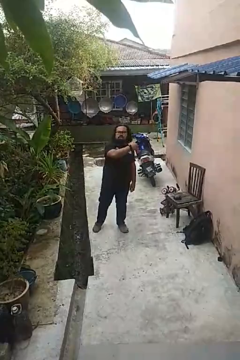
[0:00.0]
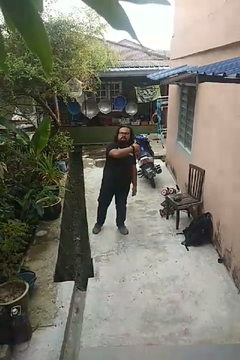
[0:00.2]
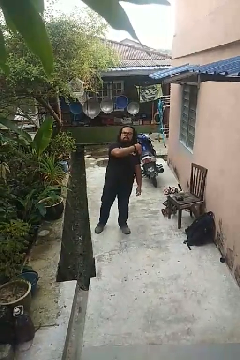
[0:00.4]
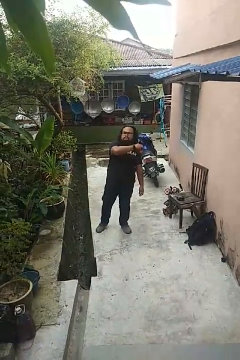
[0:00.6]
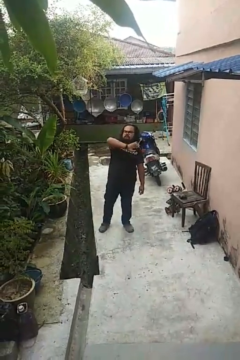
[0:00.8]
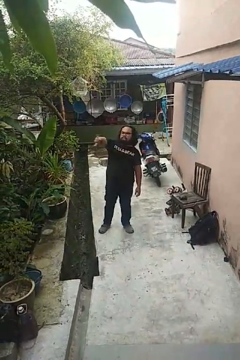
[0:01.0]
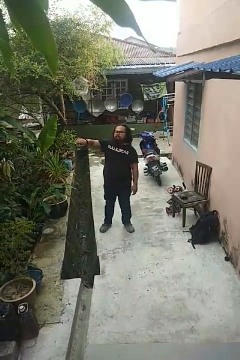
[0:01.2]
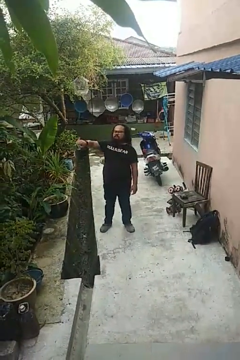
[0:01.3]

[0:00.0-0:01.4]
person gestures swipe right

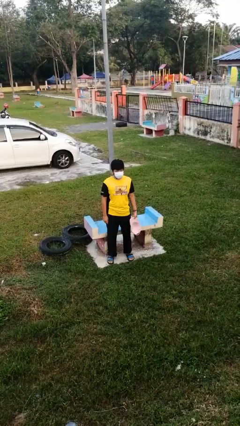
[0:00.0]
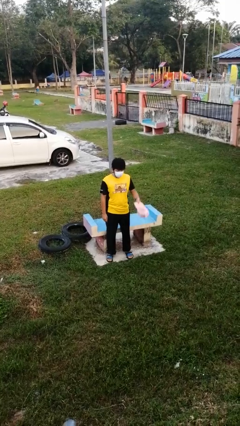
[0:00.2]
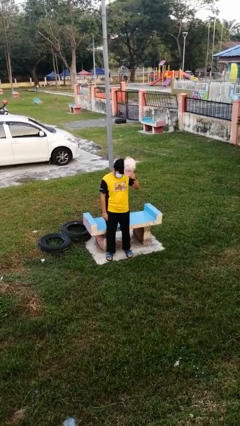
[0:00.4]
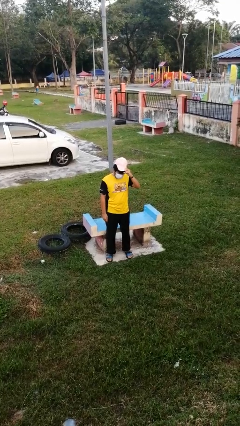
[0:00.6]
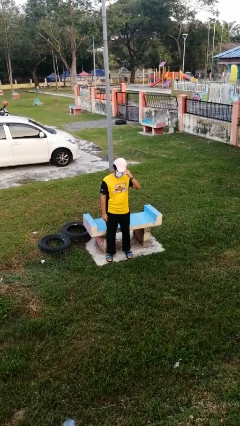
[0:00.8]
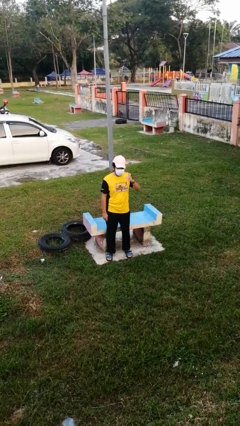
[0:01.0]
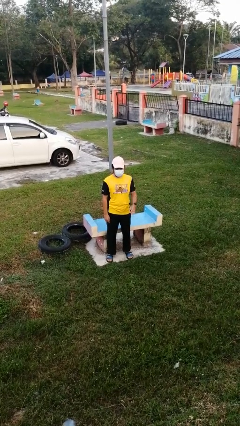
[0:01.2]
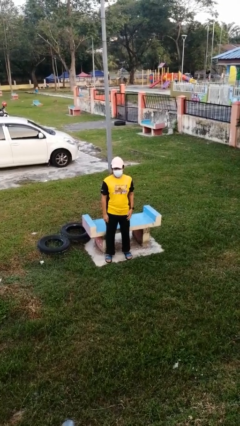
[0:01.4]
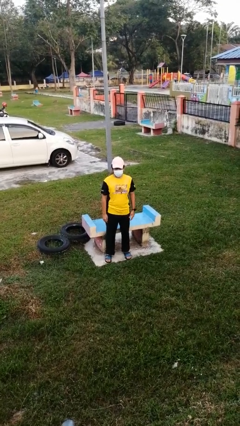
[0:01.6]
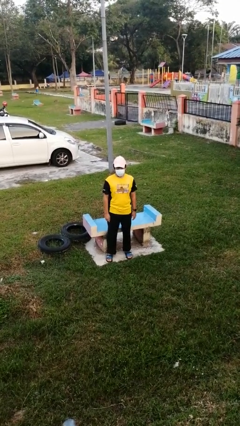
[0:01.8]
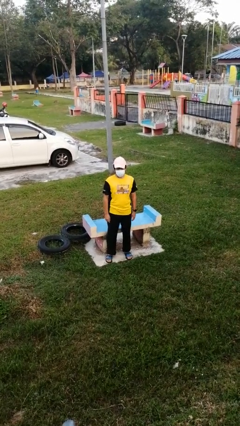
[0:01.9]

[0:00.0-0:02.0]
person puts on hat

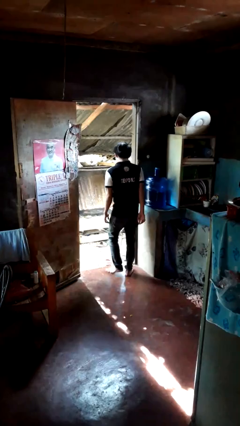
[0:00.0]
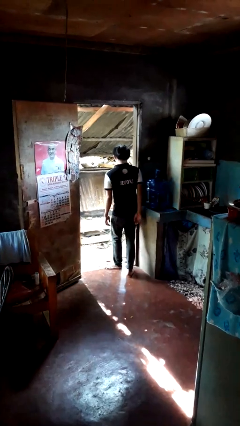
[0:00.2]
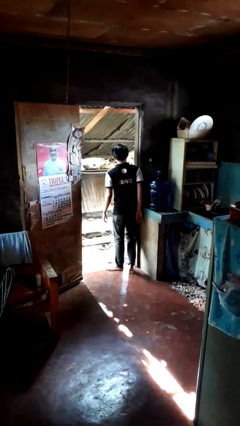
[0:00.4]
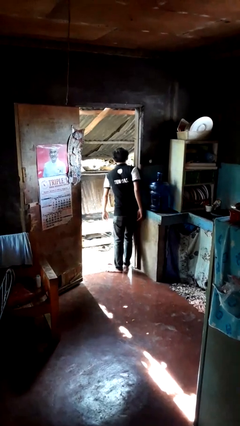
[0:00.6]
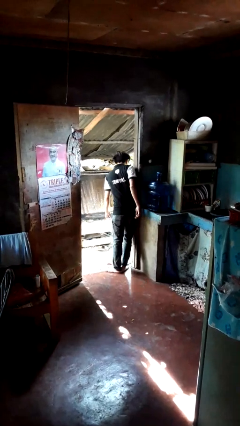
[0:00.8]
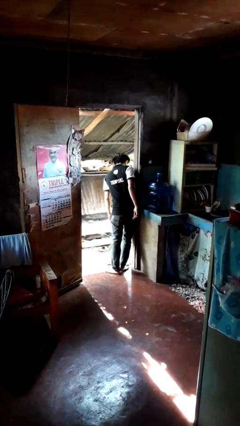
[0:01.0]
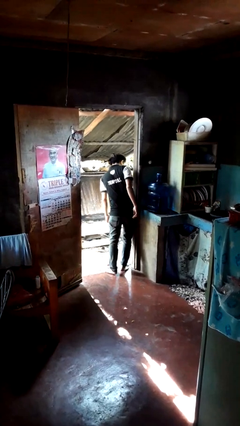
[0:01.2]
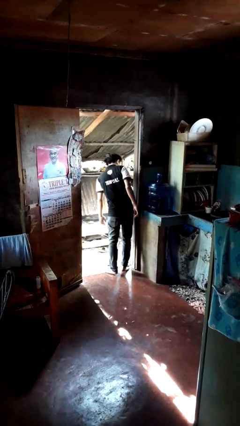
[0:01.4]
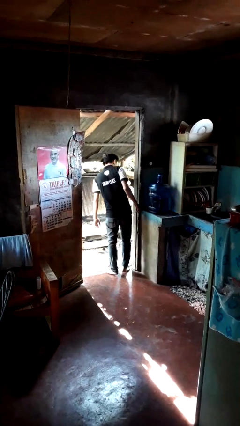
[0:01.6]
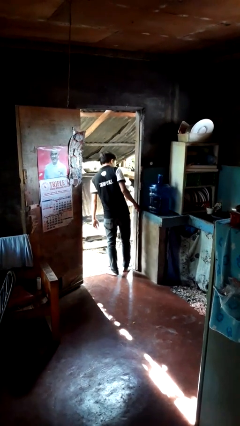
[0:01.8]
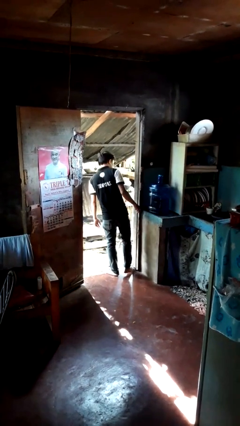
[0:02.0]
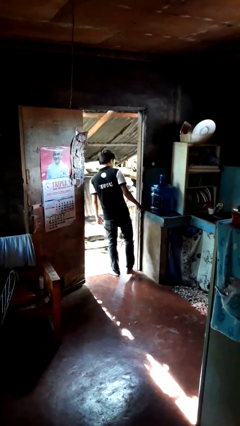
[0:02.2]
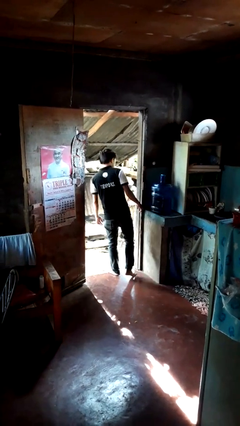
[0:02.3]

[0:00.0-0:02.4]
person bumps into wall

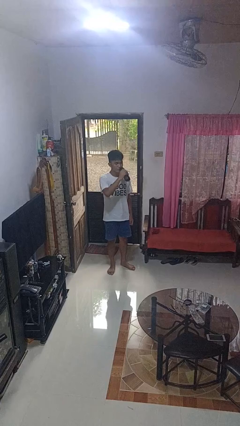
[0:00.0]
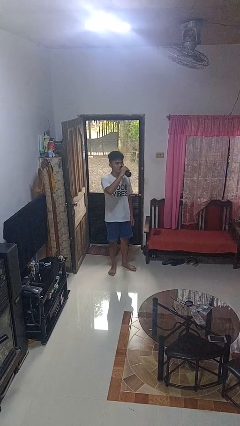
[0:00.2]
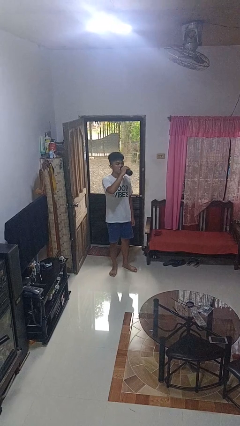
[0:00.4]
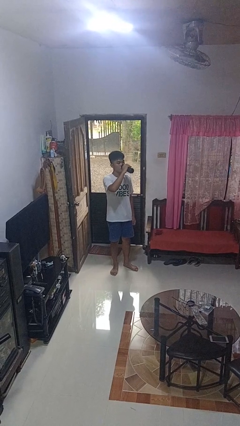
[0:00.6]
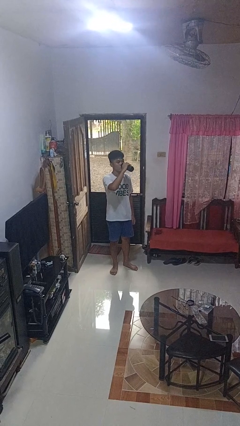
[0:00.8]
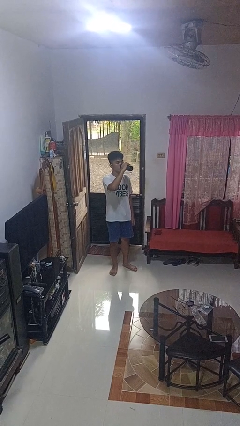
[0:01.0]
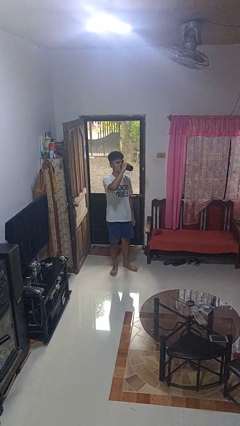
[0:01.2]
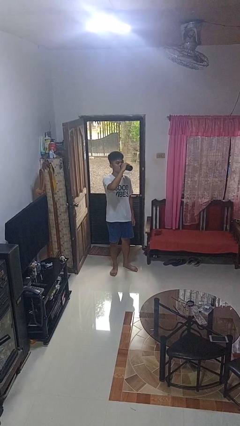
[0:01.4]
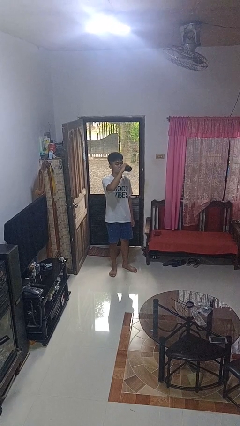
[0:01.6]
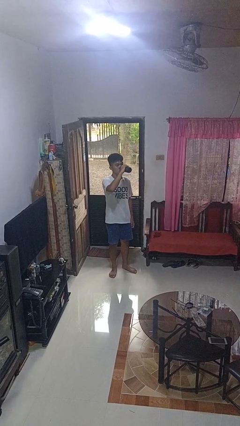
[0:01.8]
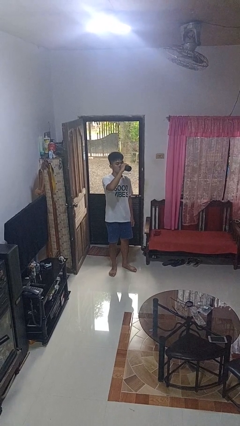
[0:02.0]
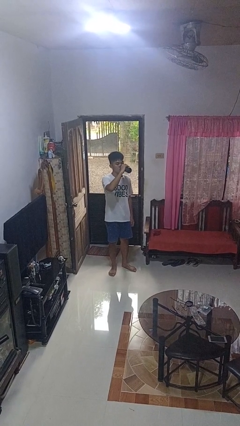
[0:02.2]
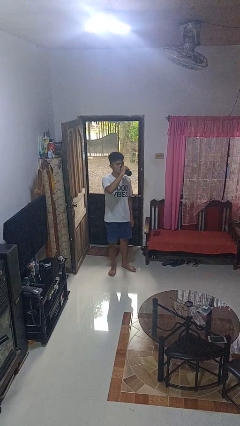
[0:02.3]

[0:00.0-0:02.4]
person drinks from bottle

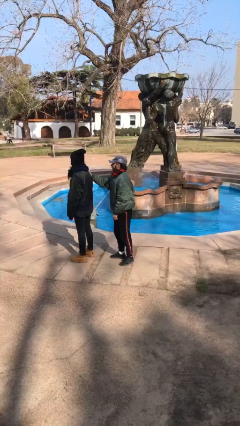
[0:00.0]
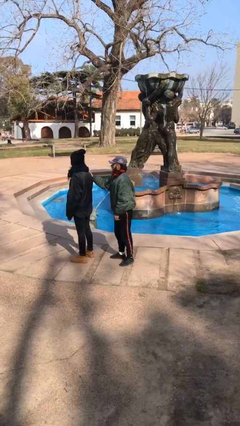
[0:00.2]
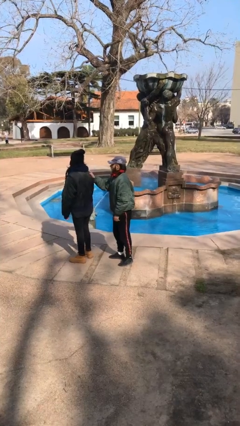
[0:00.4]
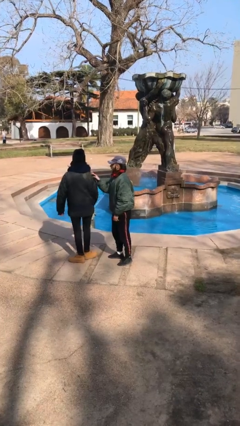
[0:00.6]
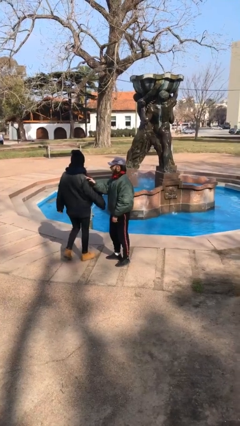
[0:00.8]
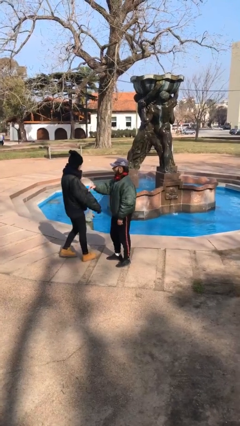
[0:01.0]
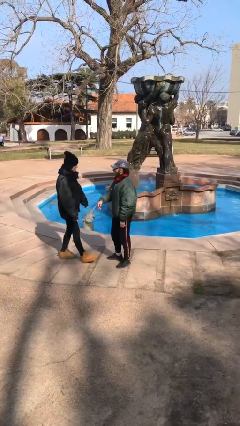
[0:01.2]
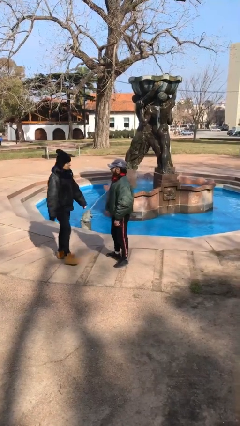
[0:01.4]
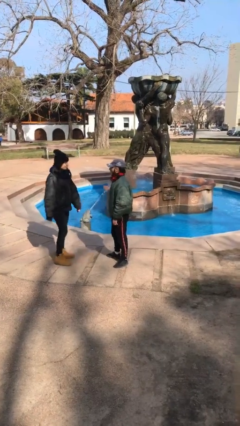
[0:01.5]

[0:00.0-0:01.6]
person spins person around

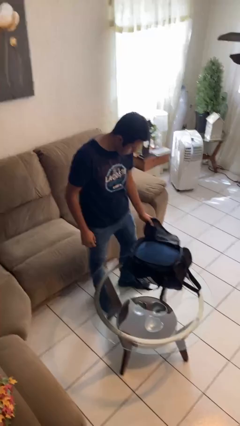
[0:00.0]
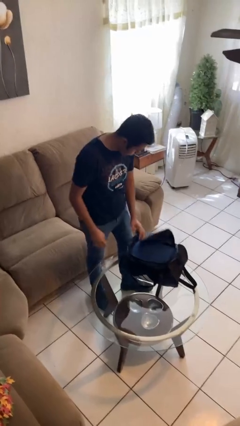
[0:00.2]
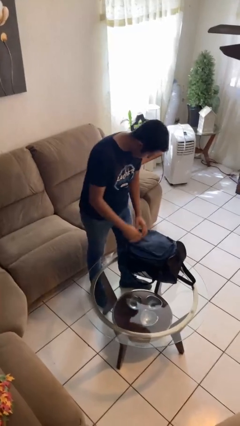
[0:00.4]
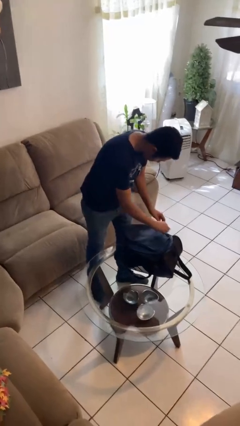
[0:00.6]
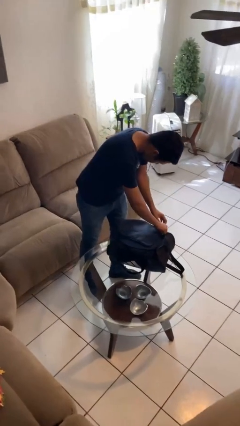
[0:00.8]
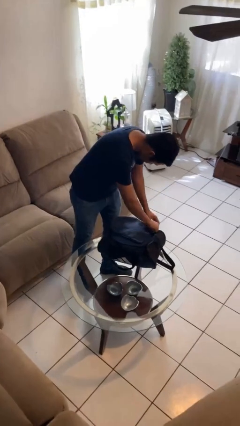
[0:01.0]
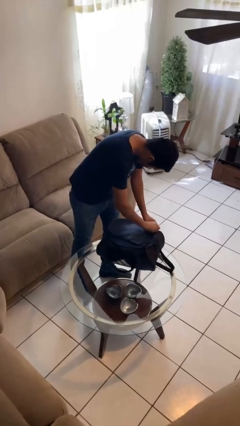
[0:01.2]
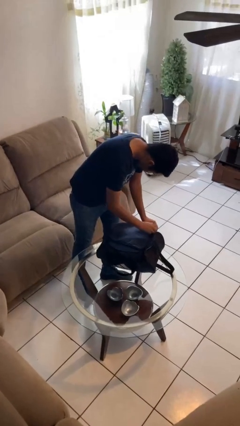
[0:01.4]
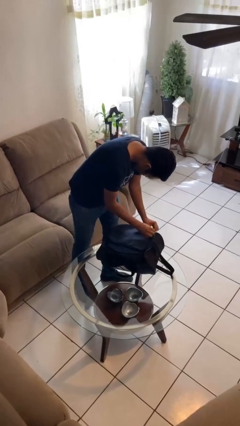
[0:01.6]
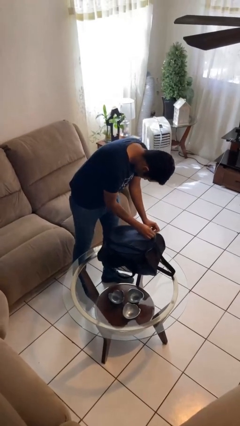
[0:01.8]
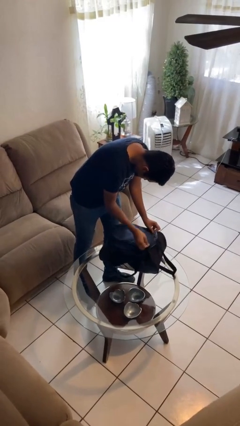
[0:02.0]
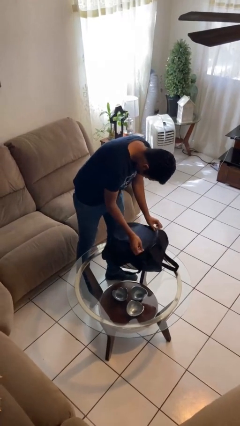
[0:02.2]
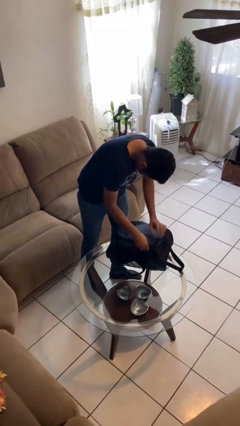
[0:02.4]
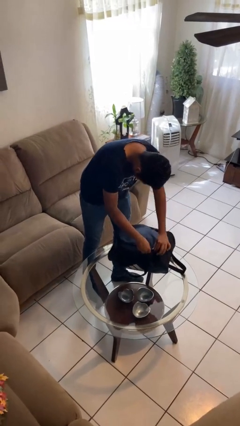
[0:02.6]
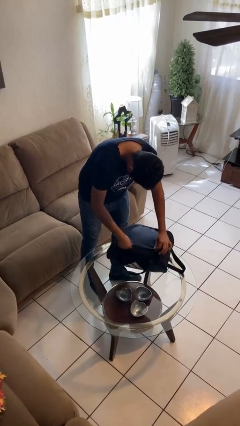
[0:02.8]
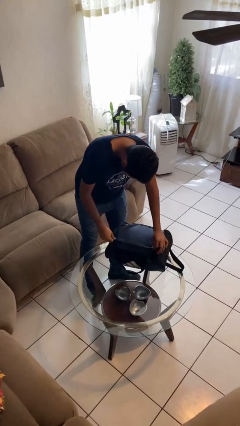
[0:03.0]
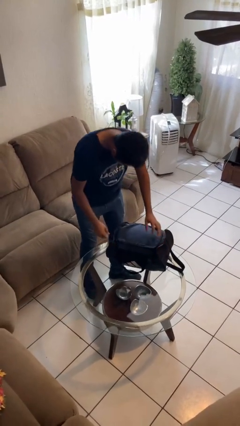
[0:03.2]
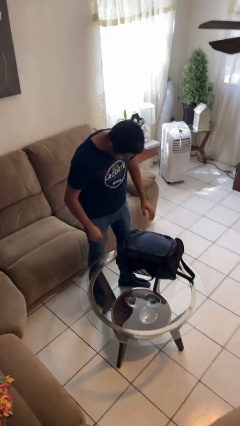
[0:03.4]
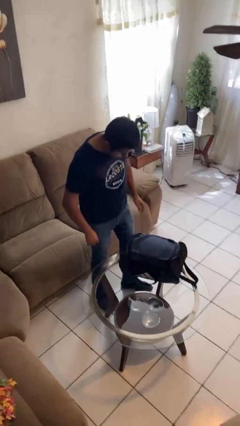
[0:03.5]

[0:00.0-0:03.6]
person closes suitcase

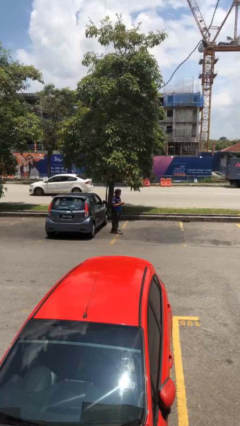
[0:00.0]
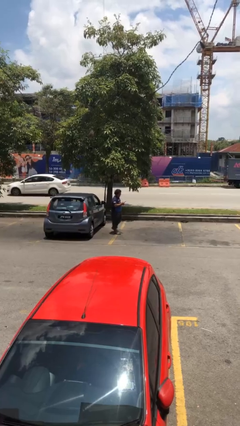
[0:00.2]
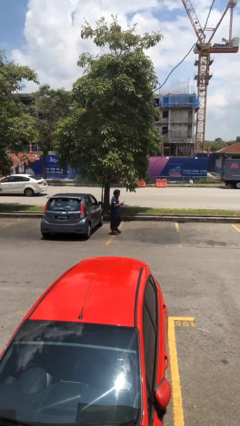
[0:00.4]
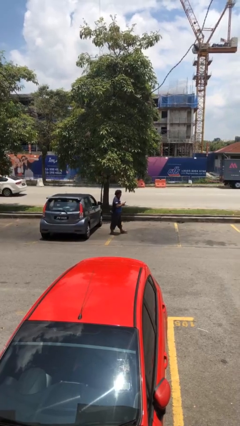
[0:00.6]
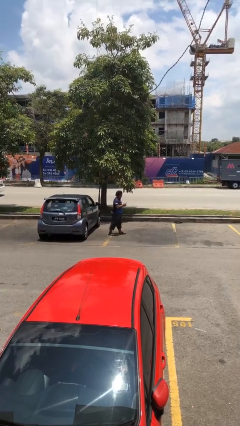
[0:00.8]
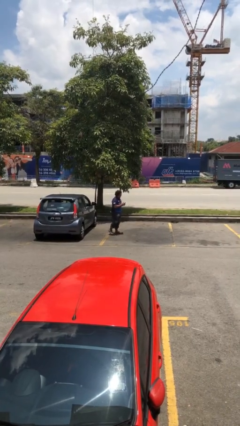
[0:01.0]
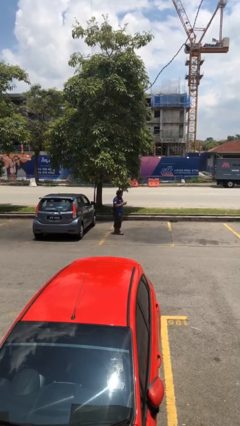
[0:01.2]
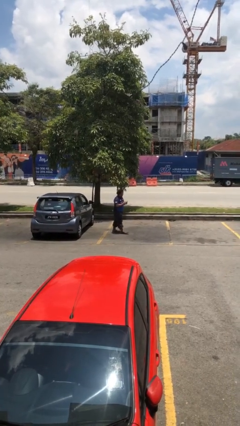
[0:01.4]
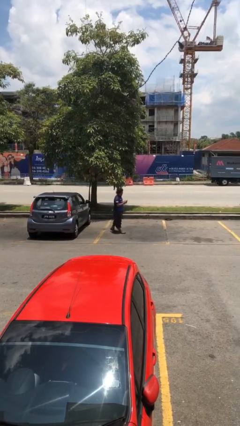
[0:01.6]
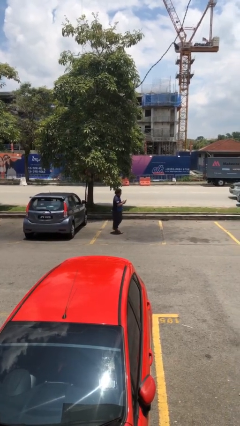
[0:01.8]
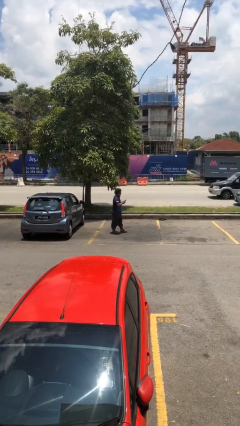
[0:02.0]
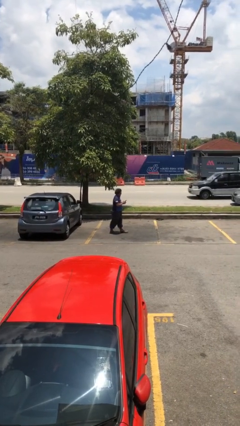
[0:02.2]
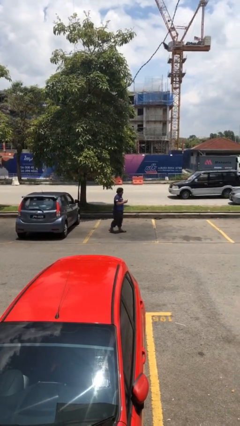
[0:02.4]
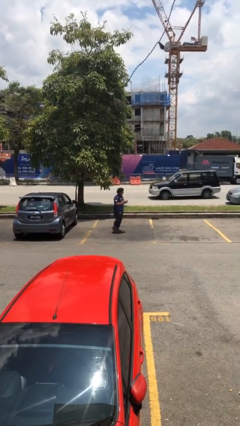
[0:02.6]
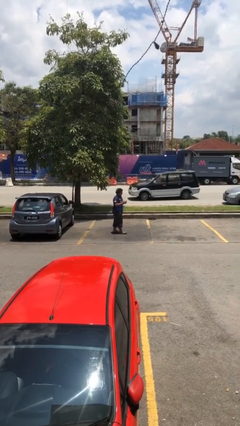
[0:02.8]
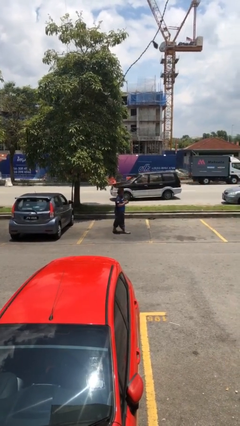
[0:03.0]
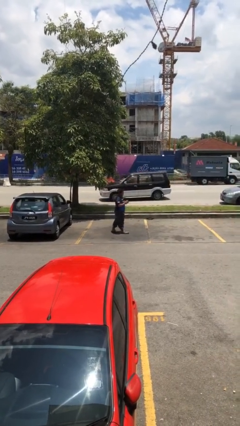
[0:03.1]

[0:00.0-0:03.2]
person texts on phone

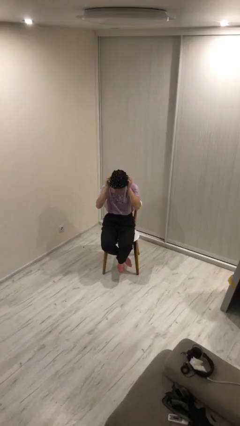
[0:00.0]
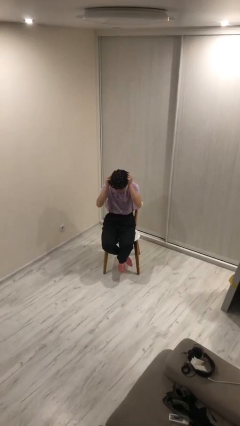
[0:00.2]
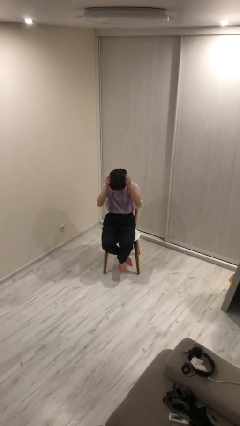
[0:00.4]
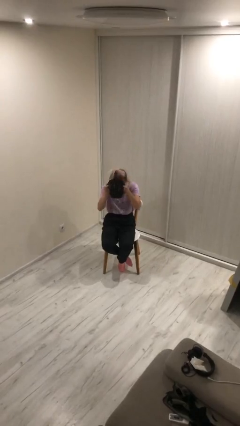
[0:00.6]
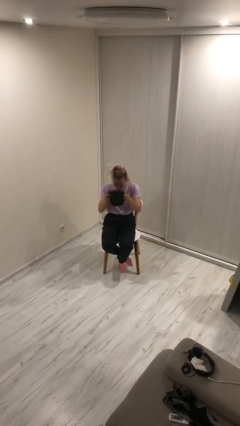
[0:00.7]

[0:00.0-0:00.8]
person takes off hat
